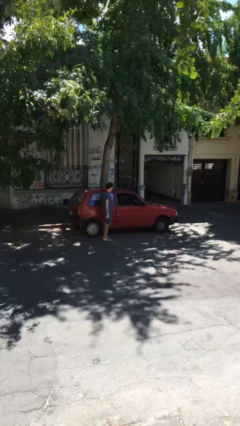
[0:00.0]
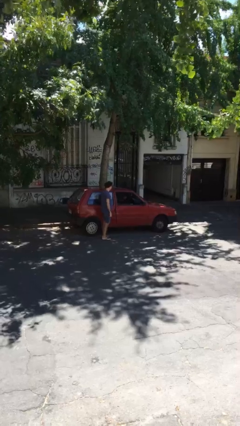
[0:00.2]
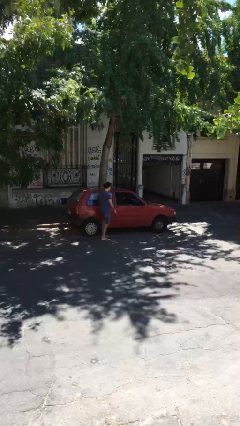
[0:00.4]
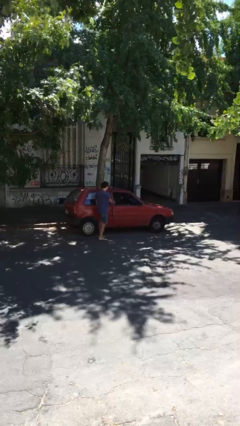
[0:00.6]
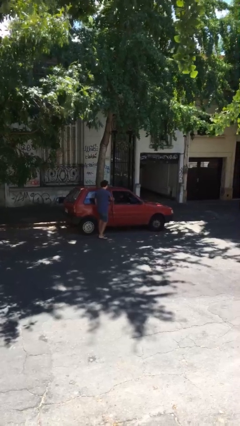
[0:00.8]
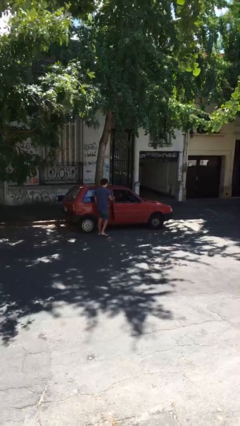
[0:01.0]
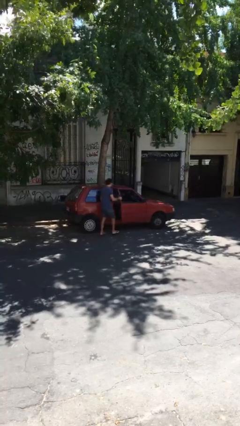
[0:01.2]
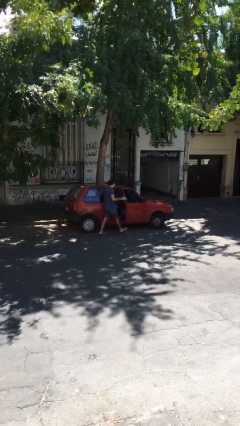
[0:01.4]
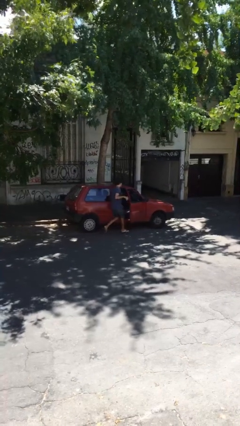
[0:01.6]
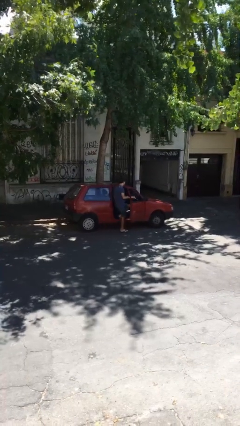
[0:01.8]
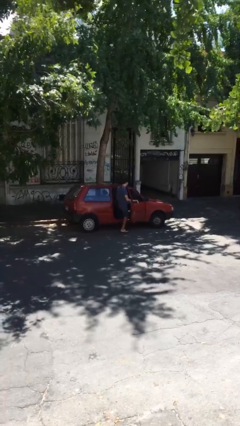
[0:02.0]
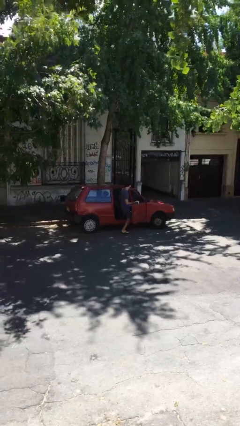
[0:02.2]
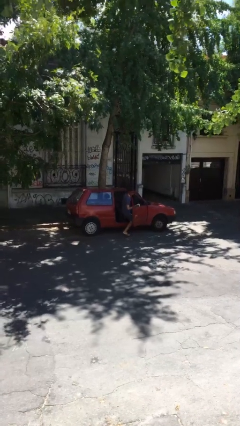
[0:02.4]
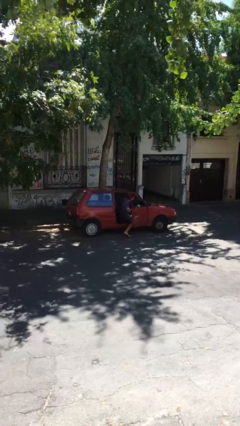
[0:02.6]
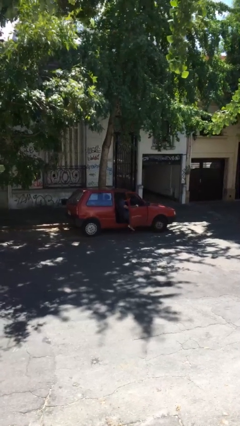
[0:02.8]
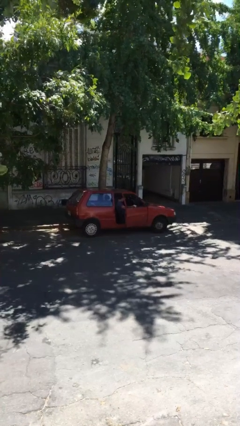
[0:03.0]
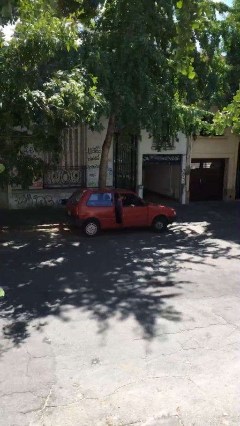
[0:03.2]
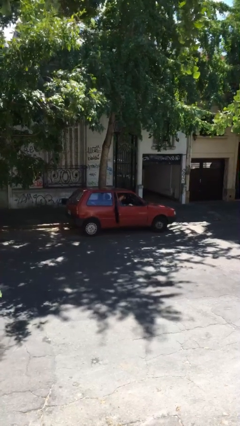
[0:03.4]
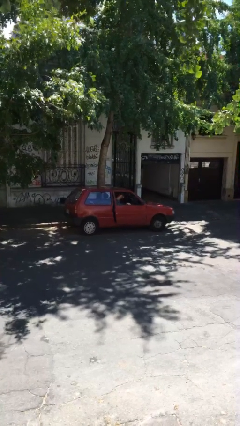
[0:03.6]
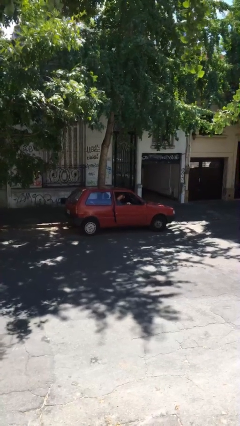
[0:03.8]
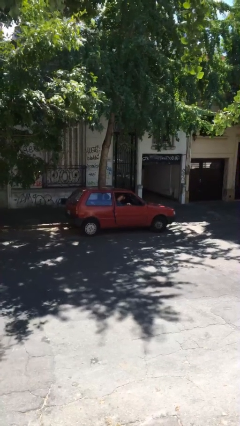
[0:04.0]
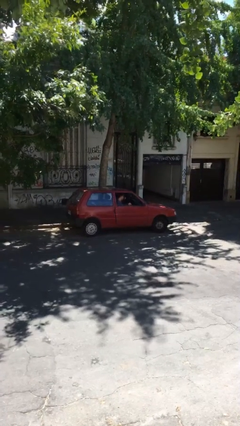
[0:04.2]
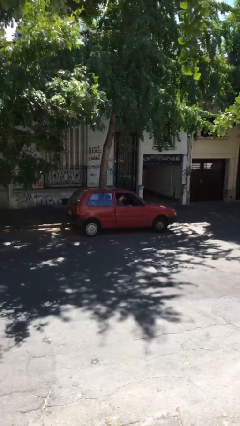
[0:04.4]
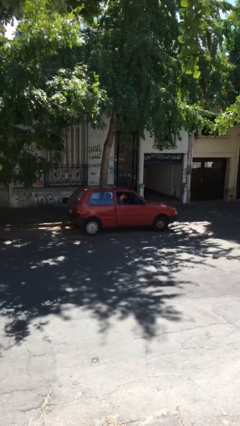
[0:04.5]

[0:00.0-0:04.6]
car picks up person

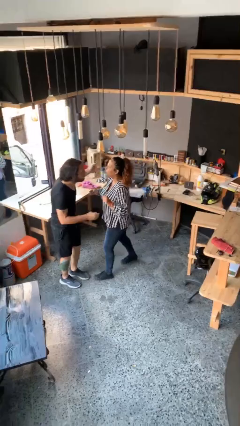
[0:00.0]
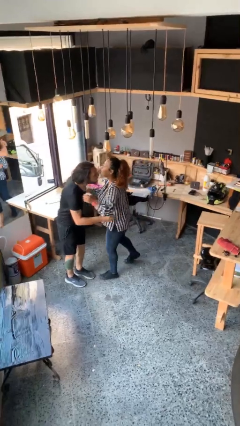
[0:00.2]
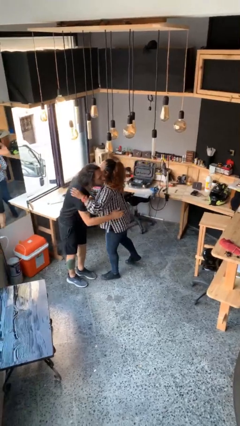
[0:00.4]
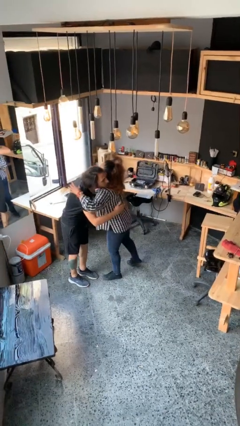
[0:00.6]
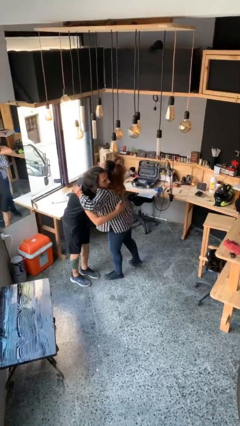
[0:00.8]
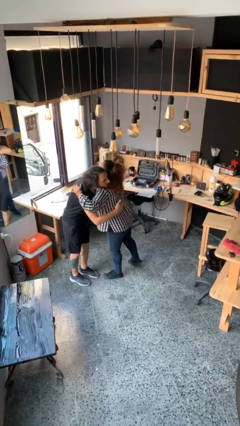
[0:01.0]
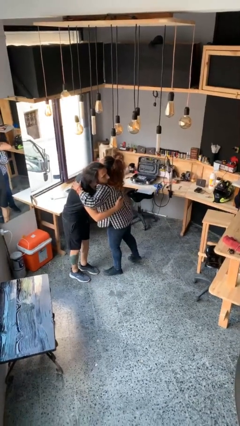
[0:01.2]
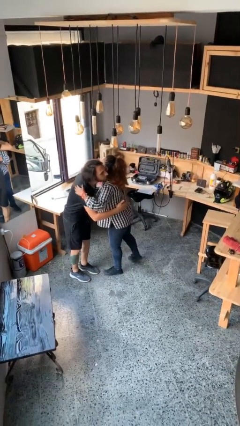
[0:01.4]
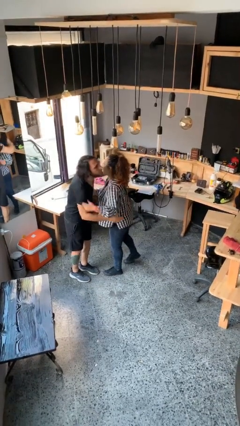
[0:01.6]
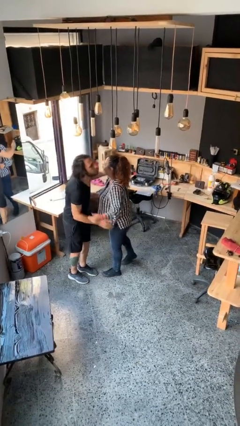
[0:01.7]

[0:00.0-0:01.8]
person embraces person

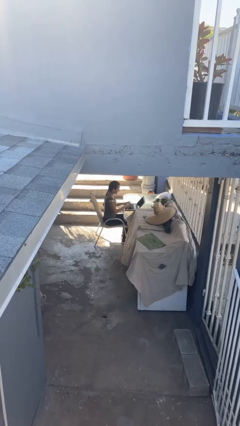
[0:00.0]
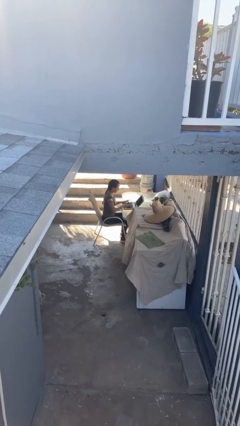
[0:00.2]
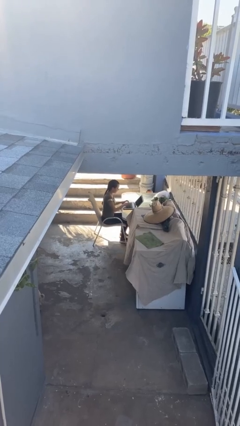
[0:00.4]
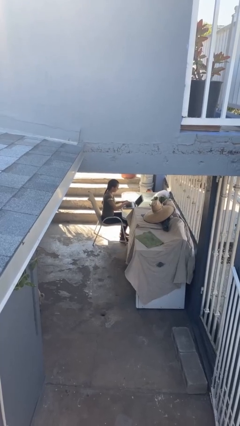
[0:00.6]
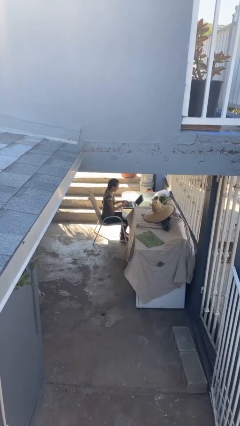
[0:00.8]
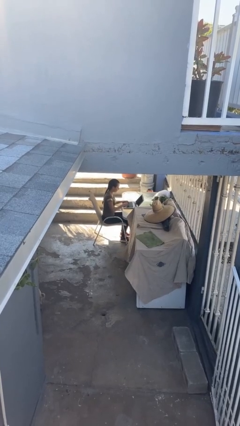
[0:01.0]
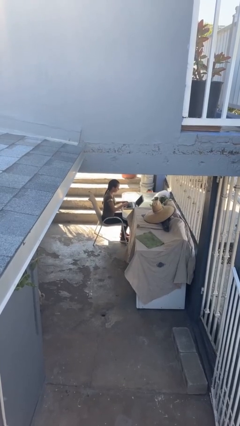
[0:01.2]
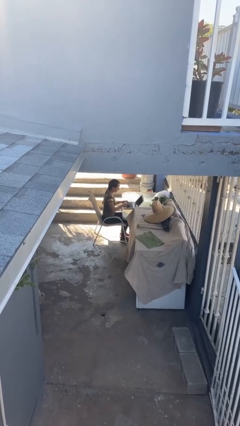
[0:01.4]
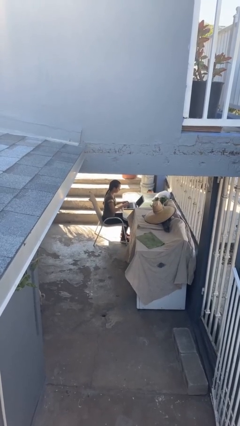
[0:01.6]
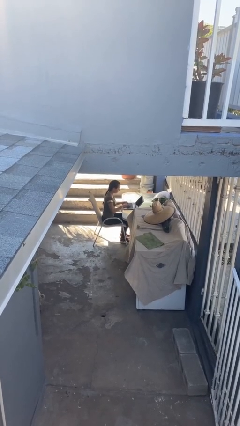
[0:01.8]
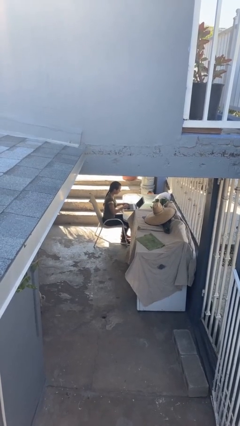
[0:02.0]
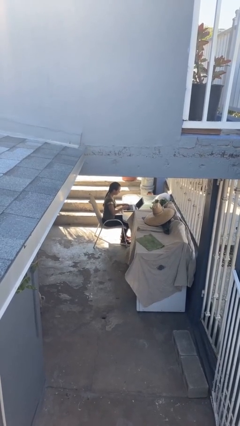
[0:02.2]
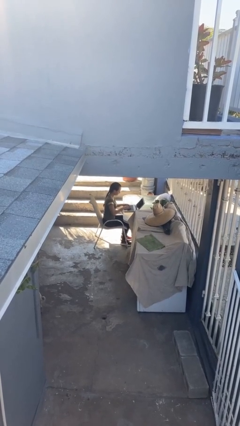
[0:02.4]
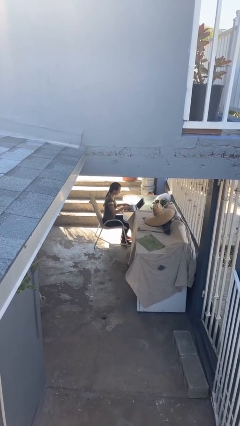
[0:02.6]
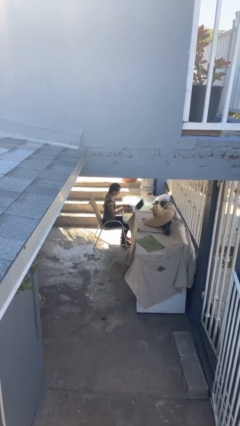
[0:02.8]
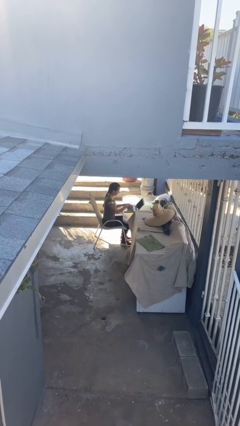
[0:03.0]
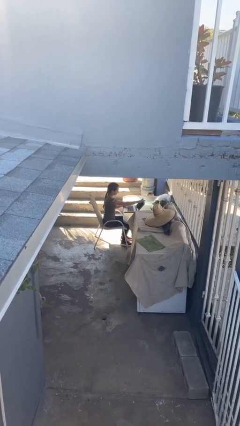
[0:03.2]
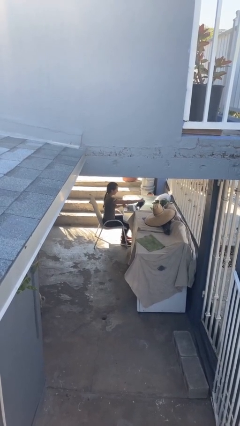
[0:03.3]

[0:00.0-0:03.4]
person interacts with laptop

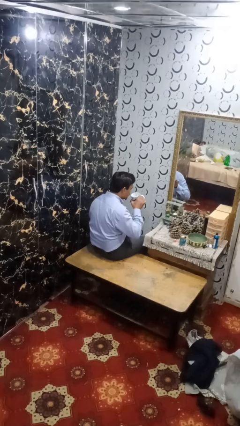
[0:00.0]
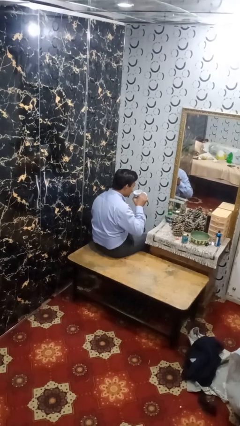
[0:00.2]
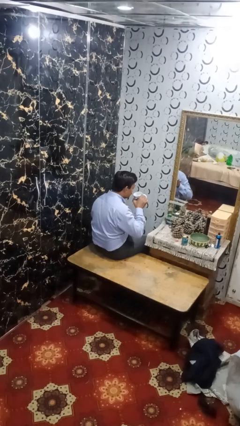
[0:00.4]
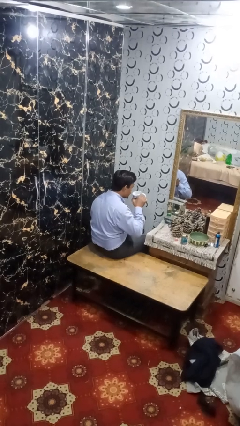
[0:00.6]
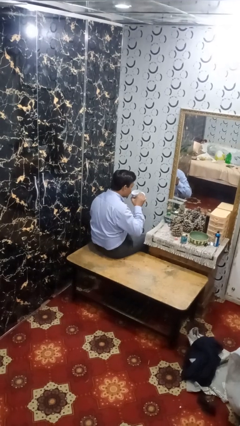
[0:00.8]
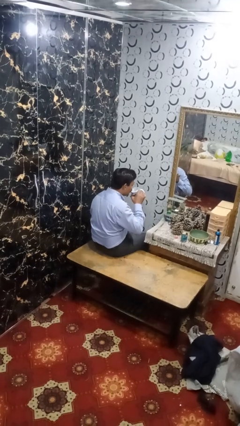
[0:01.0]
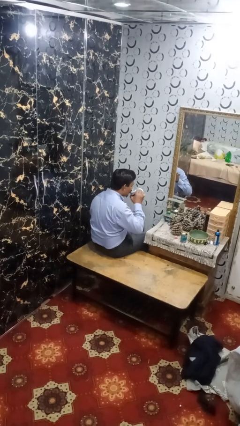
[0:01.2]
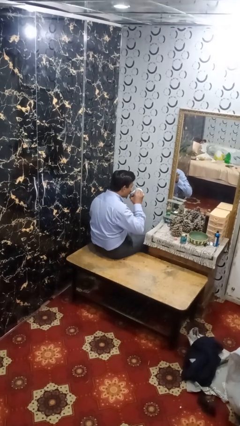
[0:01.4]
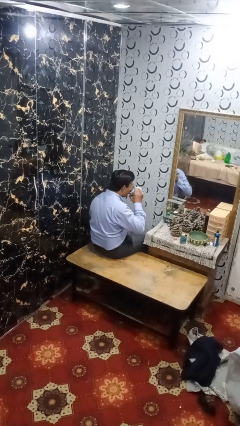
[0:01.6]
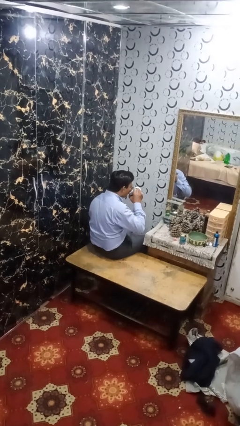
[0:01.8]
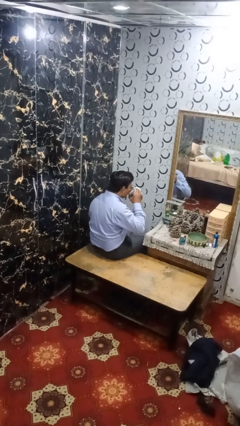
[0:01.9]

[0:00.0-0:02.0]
person drinks from mug

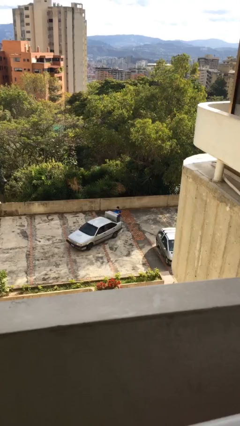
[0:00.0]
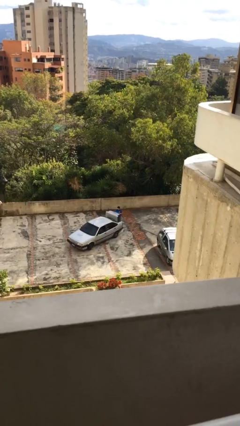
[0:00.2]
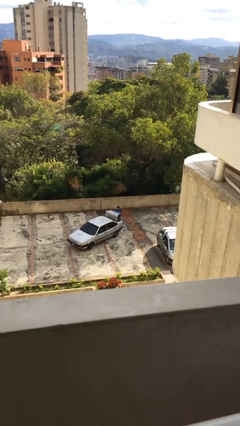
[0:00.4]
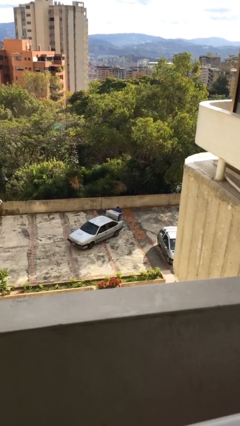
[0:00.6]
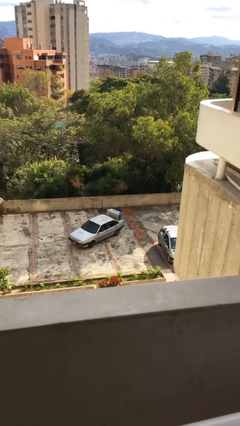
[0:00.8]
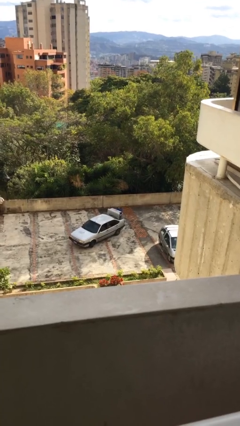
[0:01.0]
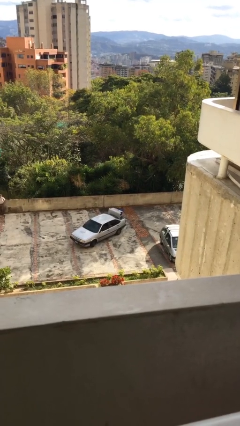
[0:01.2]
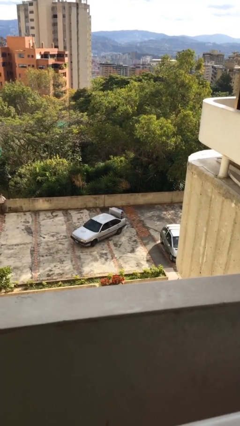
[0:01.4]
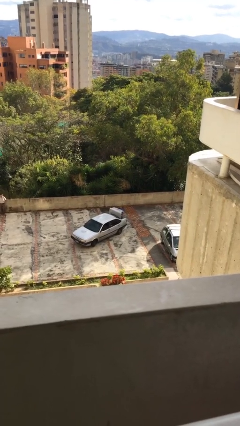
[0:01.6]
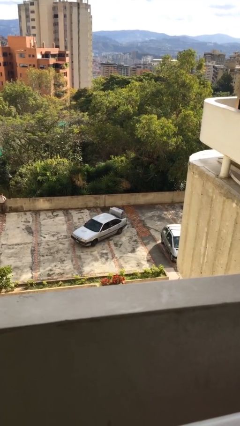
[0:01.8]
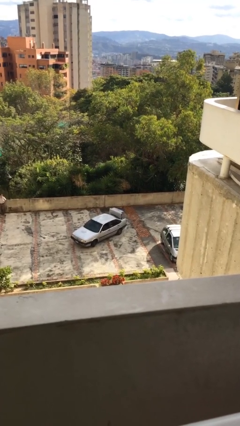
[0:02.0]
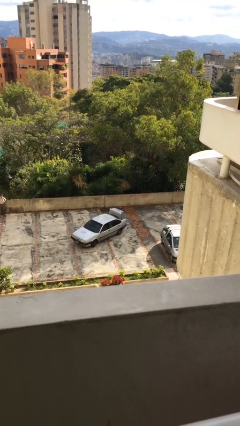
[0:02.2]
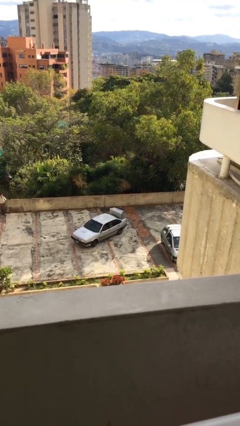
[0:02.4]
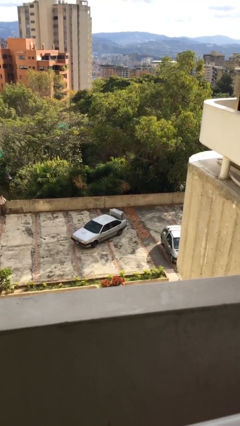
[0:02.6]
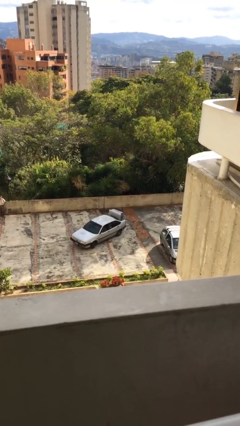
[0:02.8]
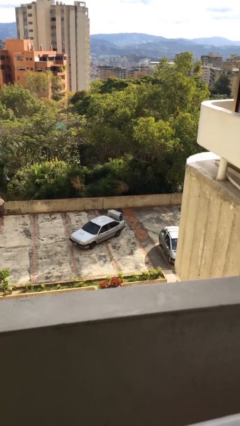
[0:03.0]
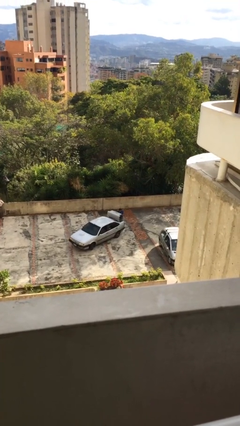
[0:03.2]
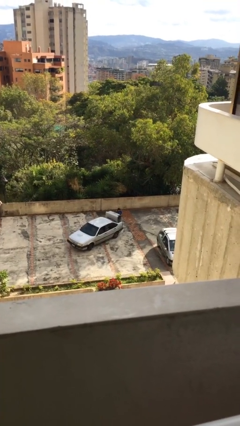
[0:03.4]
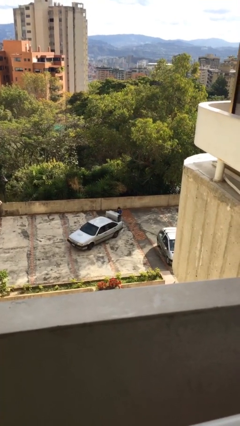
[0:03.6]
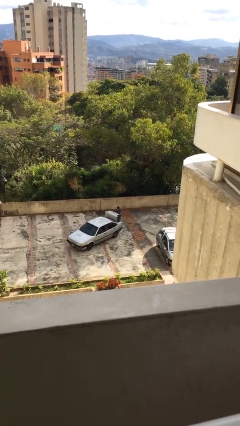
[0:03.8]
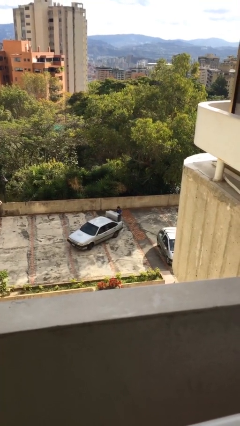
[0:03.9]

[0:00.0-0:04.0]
person loads car

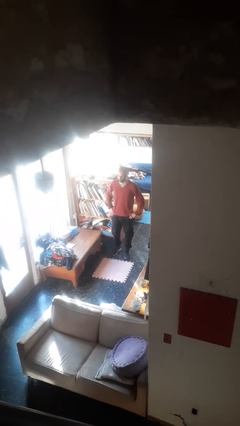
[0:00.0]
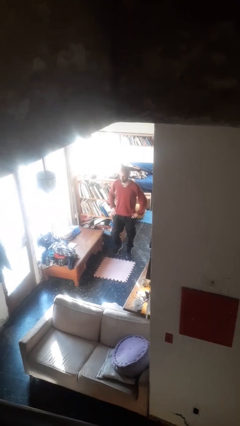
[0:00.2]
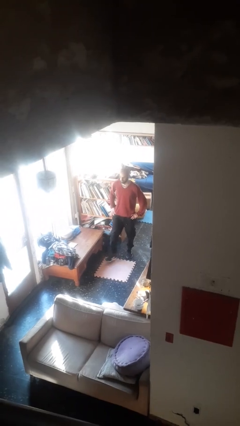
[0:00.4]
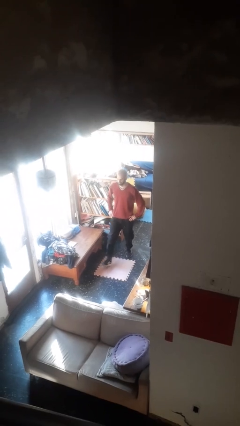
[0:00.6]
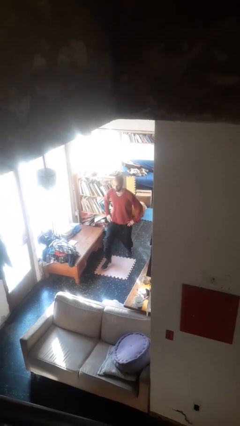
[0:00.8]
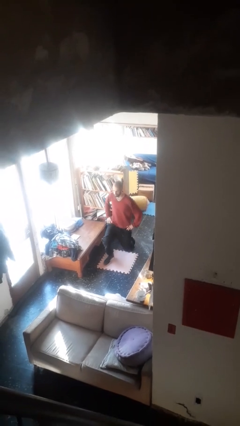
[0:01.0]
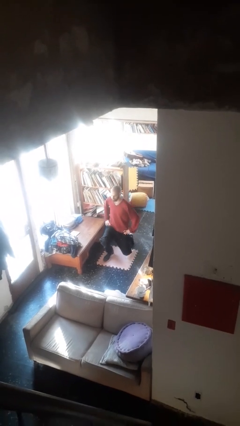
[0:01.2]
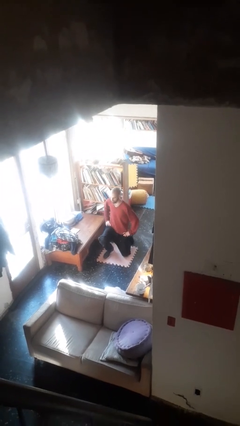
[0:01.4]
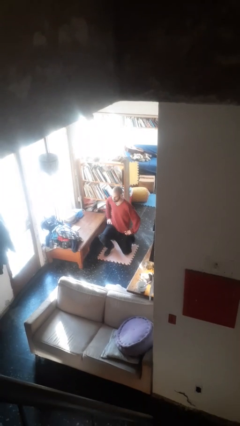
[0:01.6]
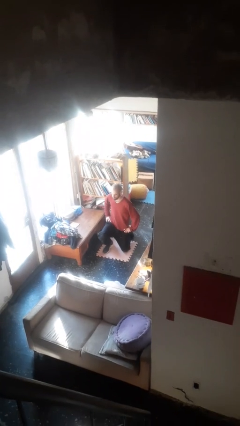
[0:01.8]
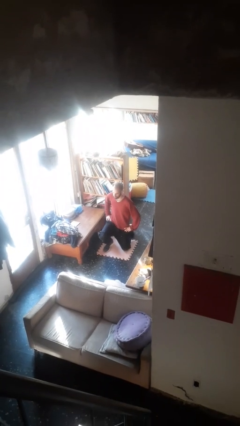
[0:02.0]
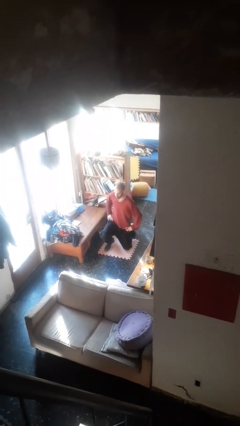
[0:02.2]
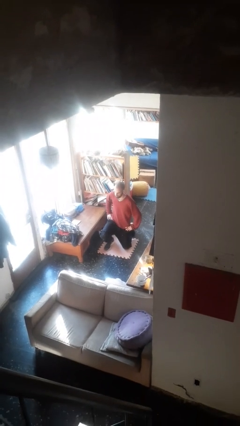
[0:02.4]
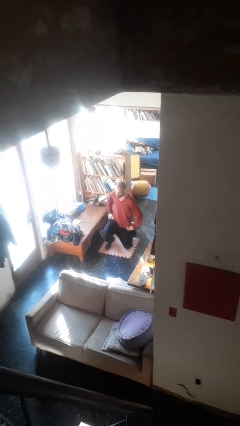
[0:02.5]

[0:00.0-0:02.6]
person kneels
